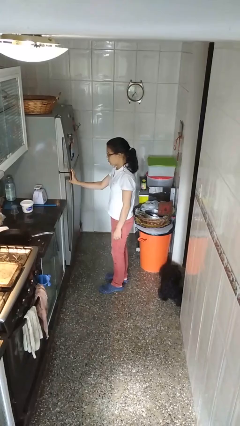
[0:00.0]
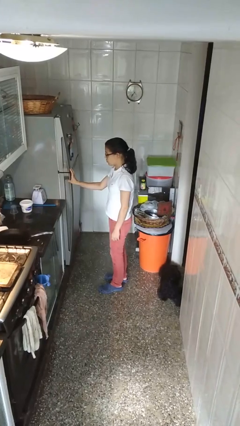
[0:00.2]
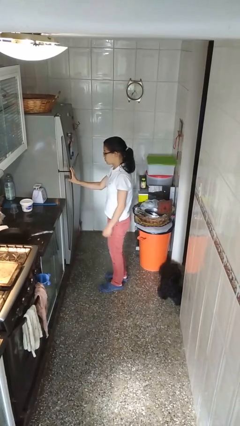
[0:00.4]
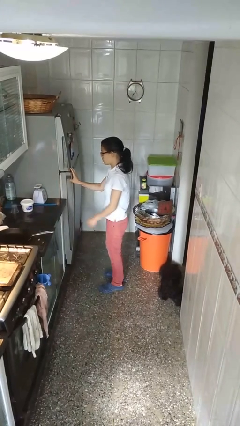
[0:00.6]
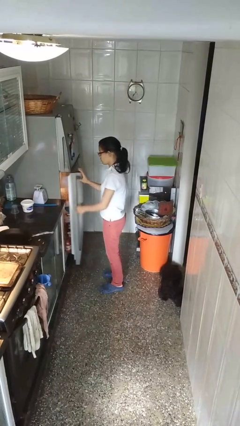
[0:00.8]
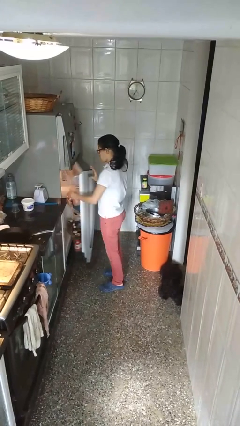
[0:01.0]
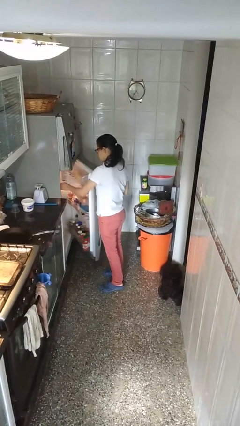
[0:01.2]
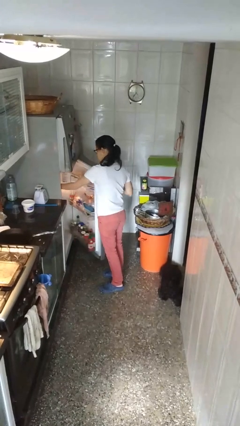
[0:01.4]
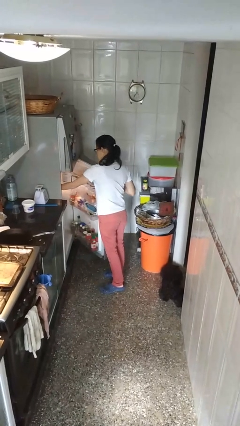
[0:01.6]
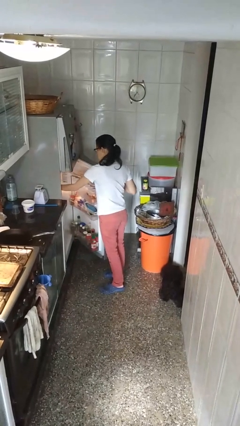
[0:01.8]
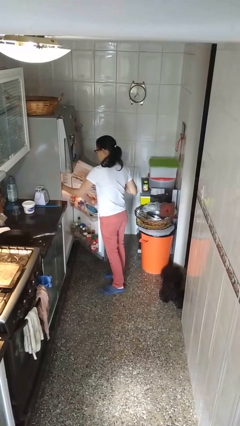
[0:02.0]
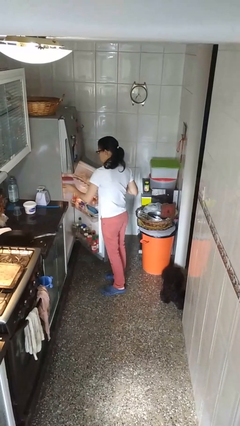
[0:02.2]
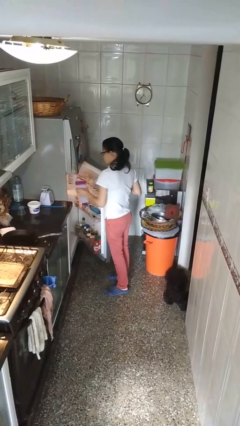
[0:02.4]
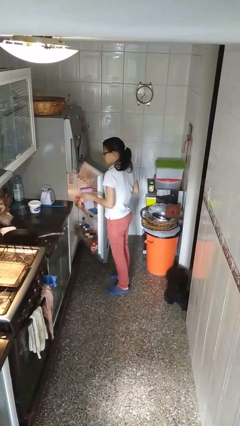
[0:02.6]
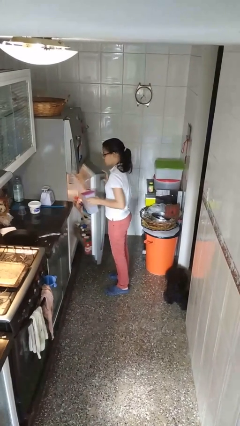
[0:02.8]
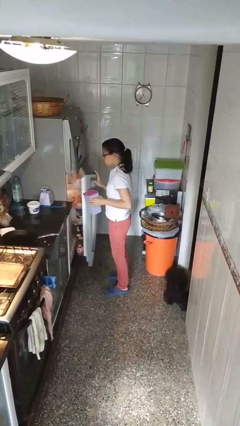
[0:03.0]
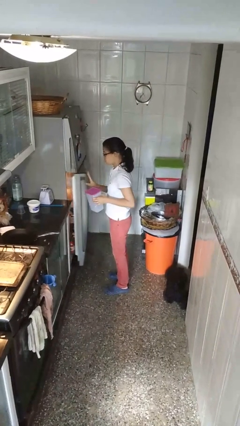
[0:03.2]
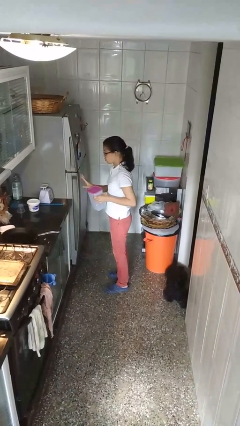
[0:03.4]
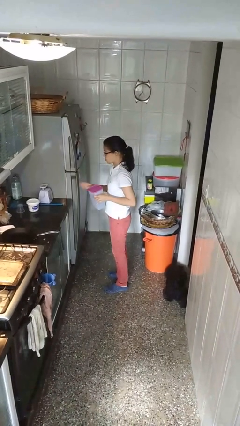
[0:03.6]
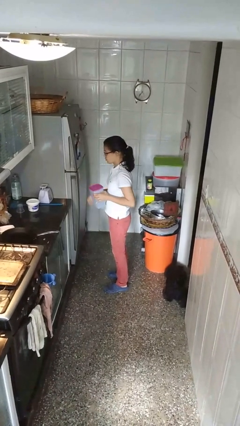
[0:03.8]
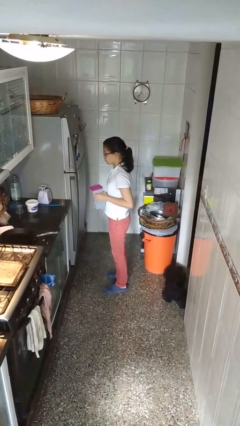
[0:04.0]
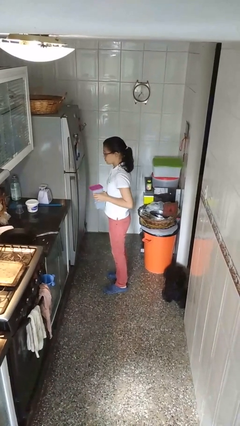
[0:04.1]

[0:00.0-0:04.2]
person takes object from refrigerator

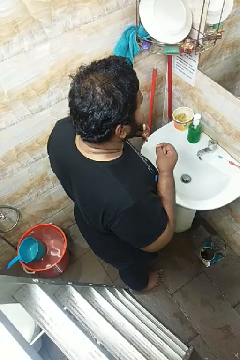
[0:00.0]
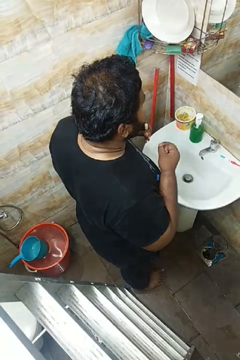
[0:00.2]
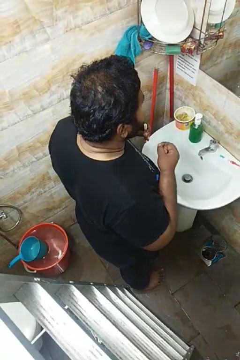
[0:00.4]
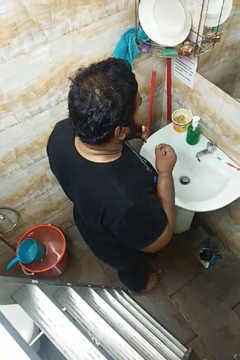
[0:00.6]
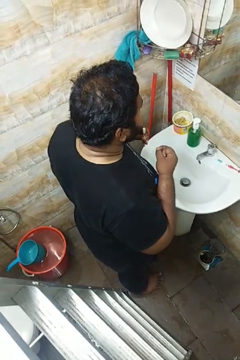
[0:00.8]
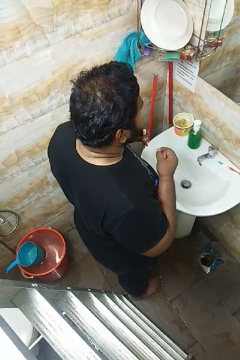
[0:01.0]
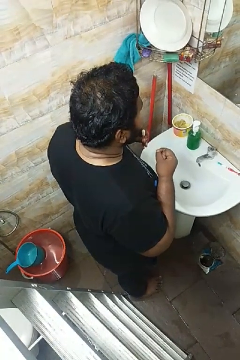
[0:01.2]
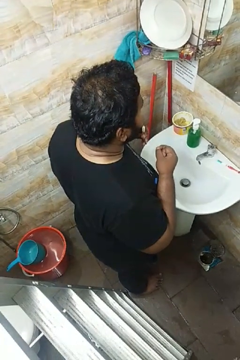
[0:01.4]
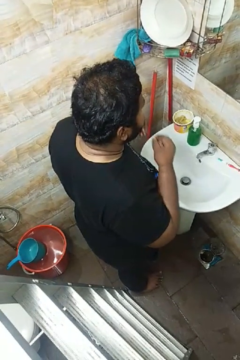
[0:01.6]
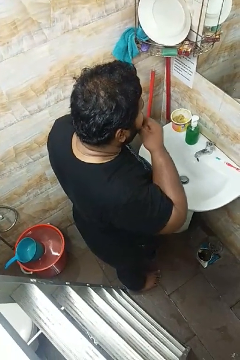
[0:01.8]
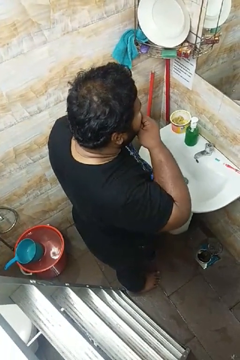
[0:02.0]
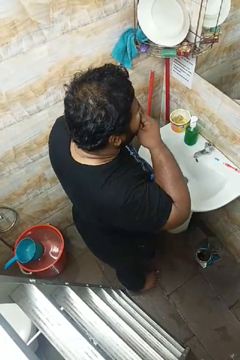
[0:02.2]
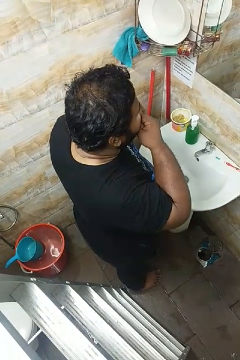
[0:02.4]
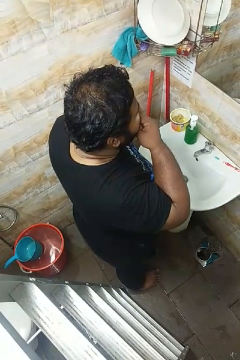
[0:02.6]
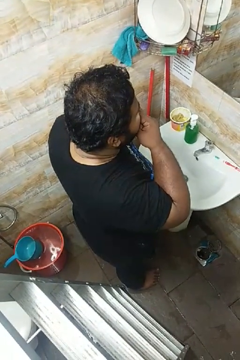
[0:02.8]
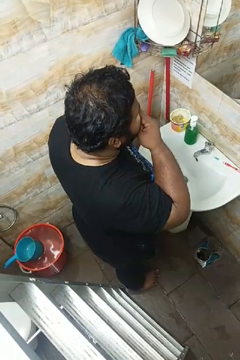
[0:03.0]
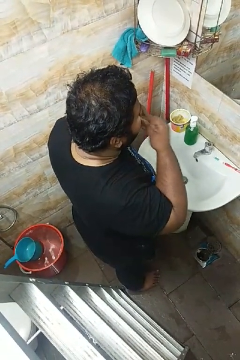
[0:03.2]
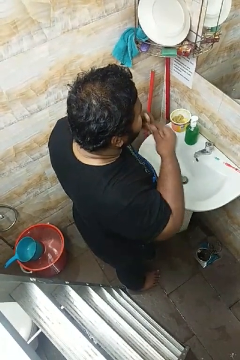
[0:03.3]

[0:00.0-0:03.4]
person flosses

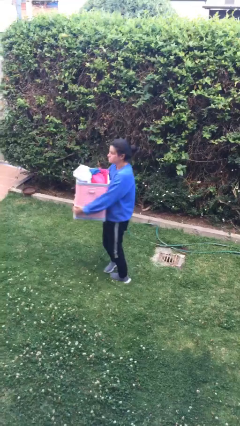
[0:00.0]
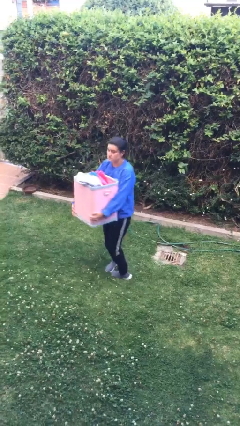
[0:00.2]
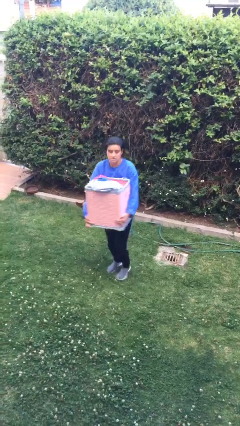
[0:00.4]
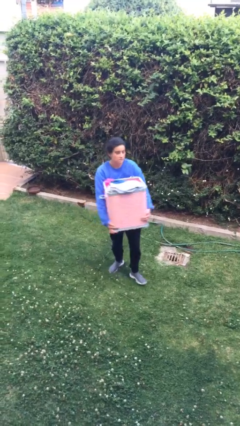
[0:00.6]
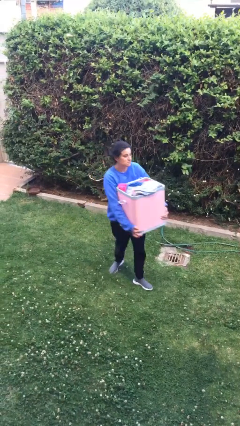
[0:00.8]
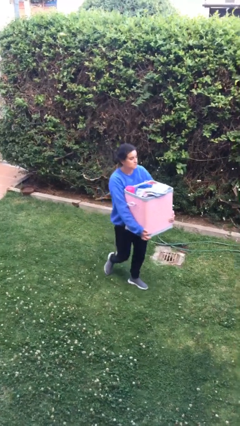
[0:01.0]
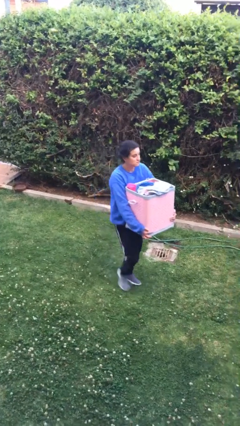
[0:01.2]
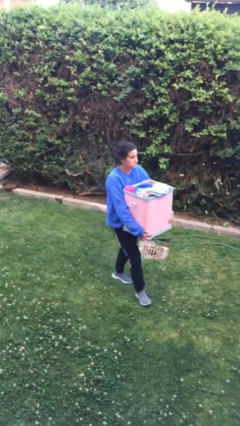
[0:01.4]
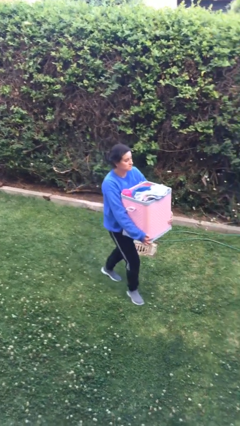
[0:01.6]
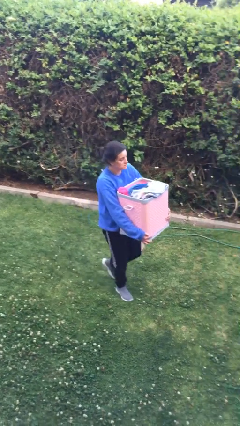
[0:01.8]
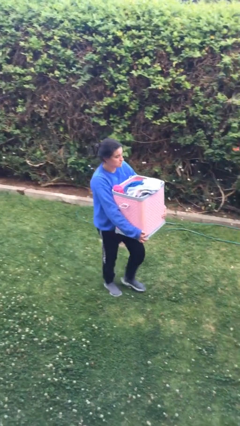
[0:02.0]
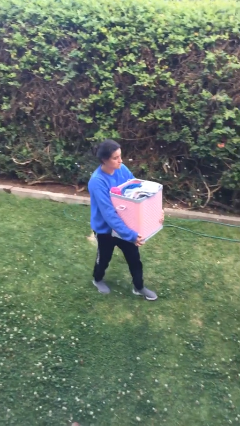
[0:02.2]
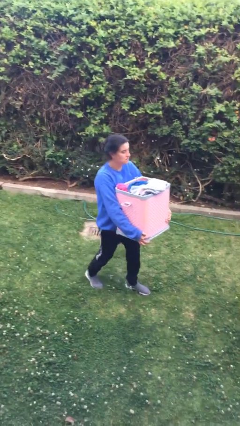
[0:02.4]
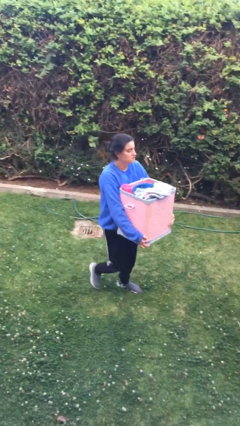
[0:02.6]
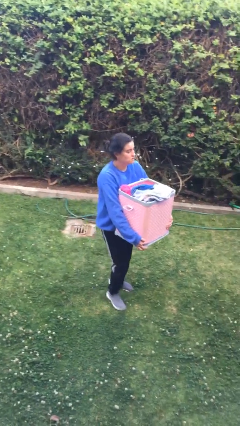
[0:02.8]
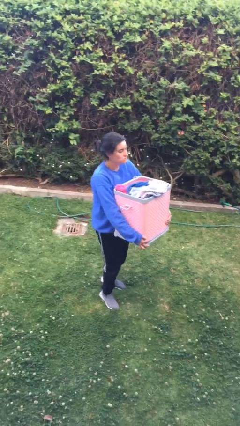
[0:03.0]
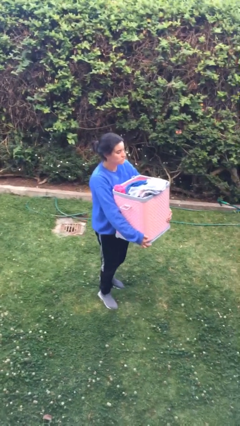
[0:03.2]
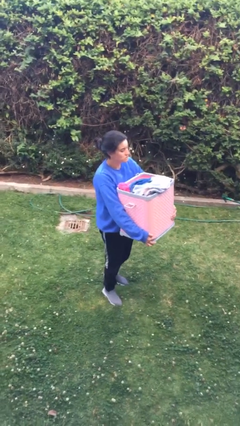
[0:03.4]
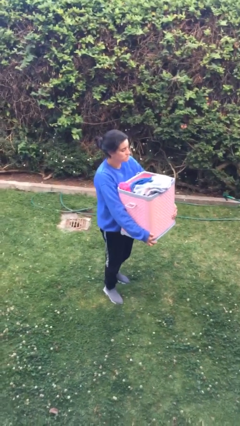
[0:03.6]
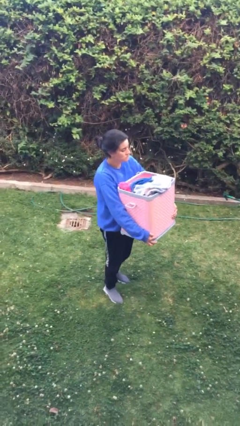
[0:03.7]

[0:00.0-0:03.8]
person carries groceries

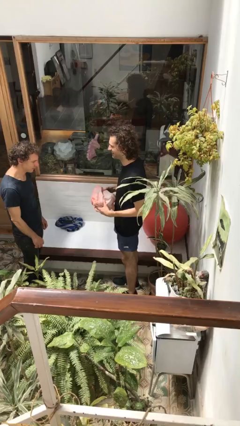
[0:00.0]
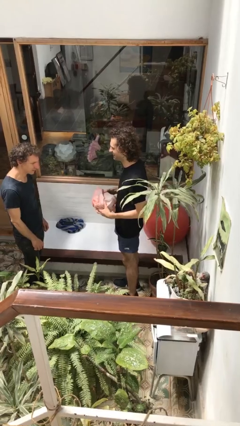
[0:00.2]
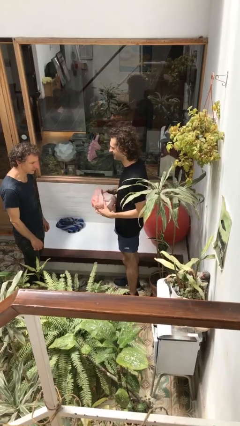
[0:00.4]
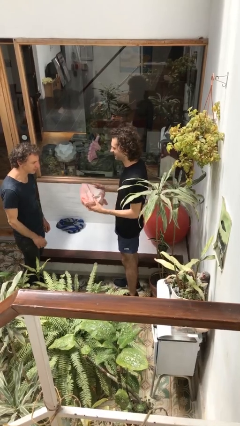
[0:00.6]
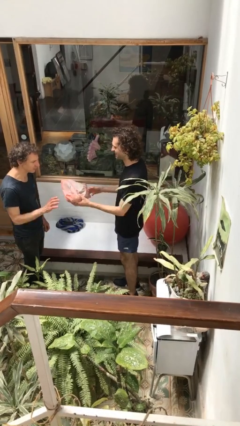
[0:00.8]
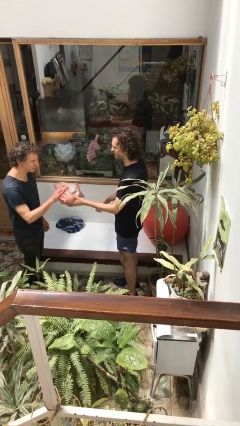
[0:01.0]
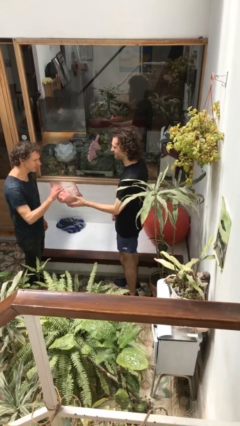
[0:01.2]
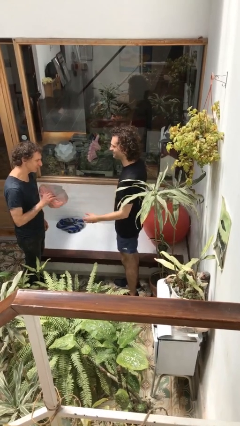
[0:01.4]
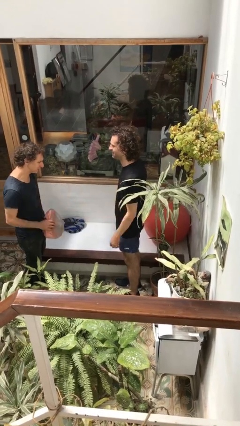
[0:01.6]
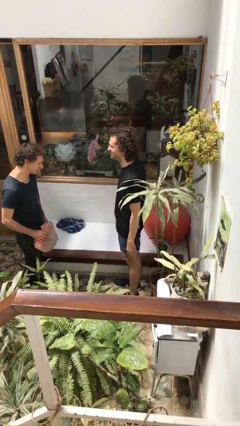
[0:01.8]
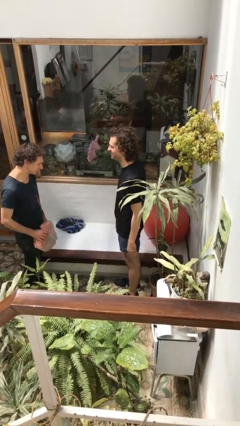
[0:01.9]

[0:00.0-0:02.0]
person transfers object to person

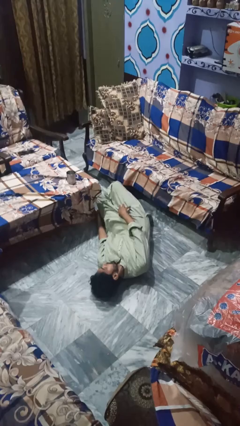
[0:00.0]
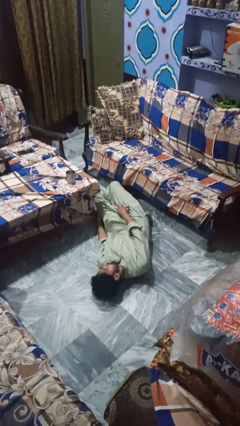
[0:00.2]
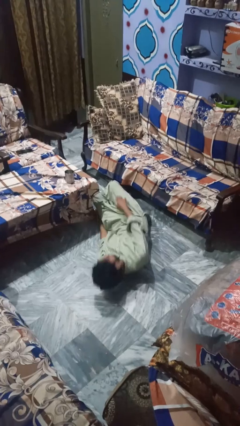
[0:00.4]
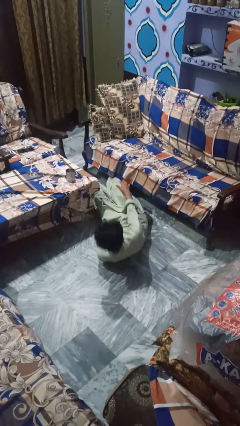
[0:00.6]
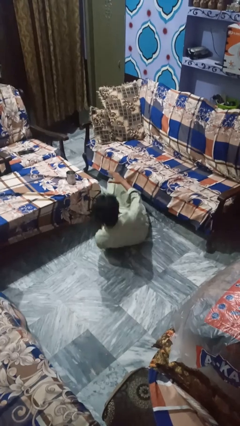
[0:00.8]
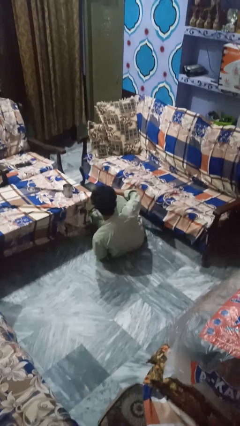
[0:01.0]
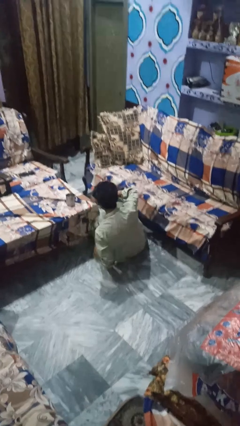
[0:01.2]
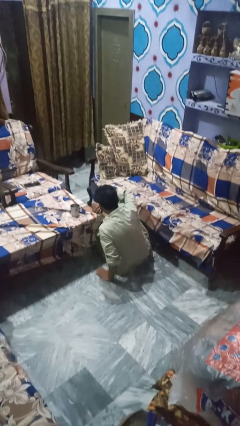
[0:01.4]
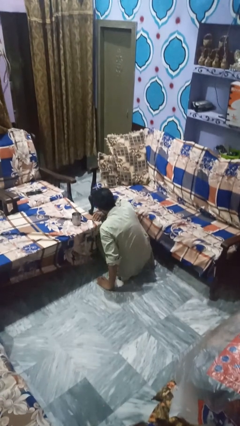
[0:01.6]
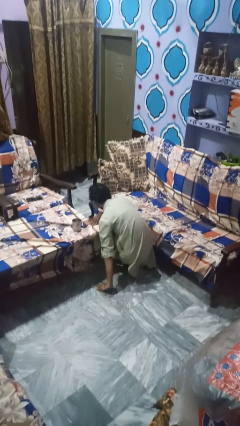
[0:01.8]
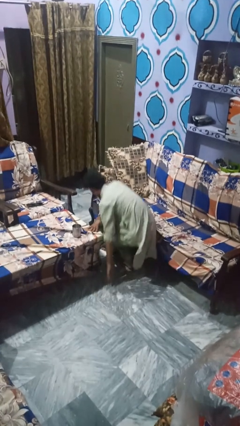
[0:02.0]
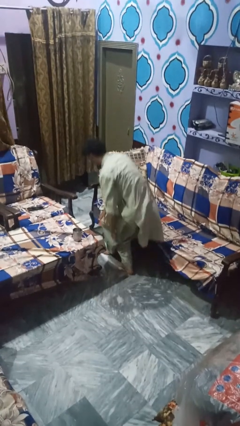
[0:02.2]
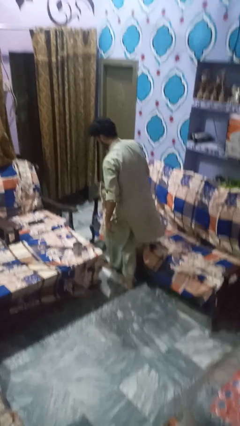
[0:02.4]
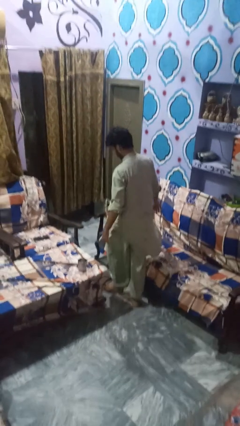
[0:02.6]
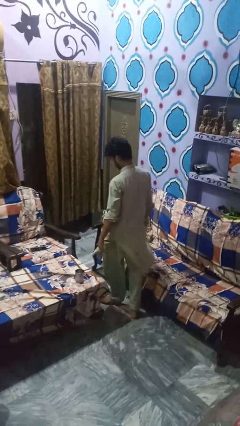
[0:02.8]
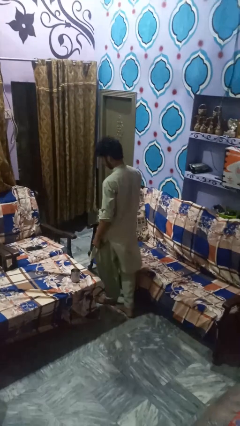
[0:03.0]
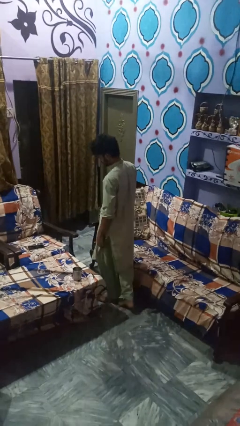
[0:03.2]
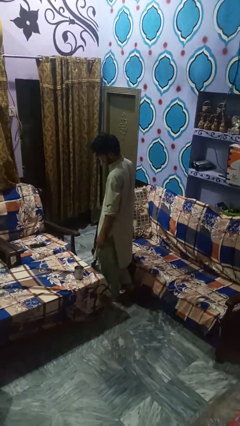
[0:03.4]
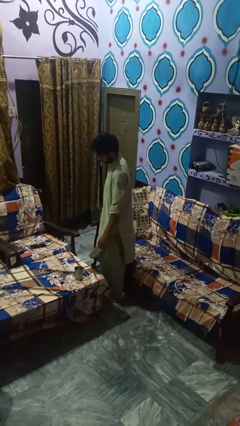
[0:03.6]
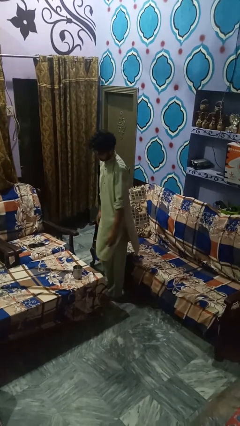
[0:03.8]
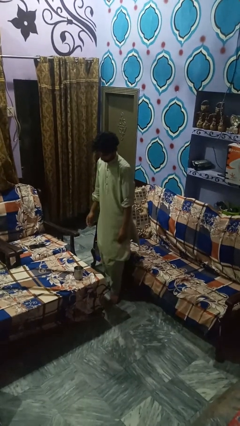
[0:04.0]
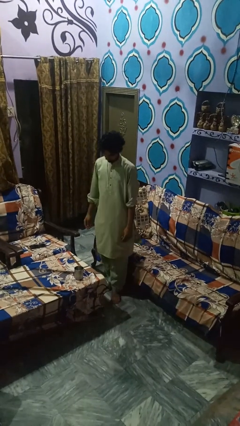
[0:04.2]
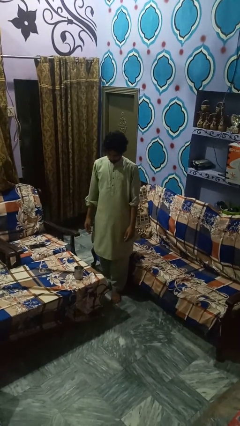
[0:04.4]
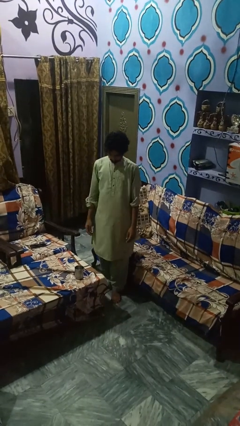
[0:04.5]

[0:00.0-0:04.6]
person stands up from floor

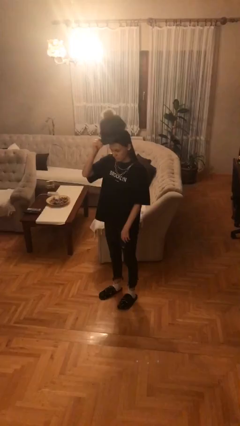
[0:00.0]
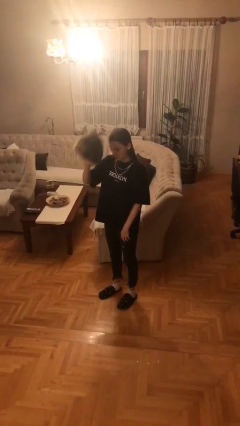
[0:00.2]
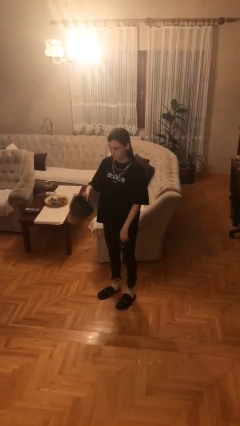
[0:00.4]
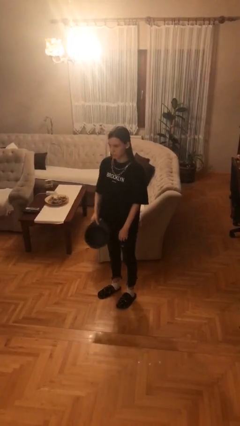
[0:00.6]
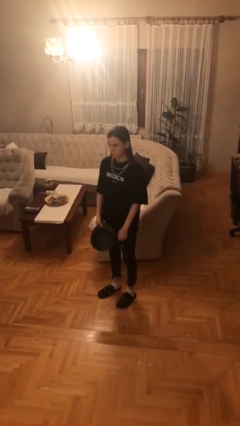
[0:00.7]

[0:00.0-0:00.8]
person takes off hat
